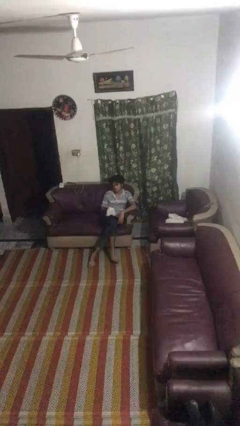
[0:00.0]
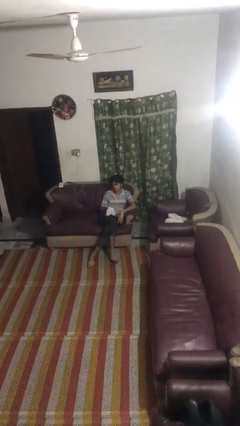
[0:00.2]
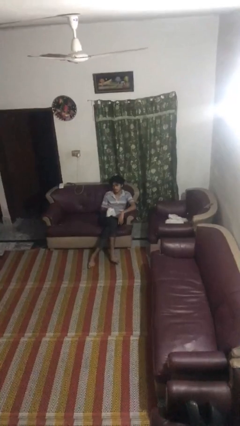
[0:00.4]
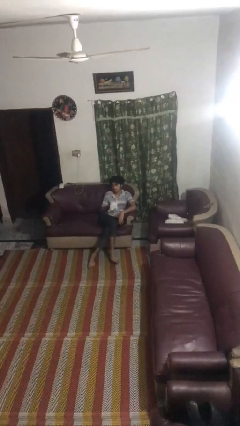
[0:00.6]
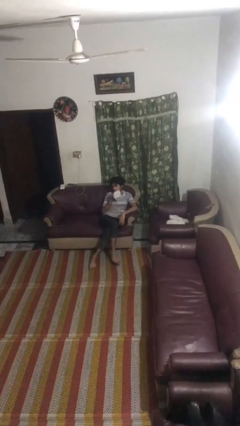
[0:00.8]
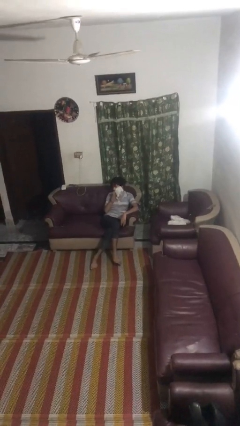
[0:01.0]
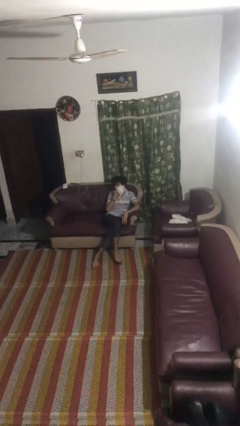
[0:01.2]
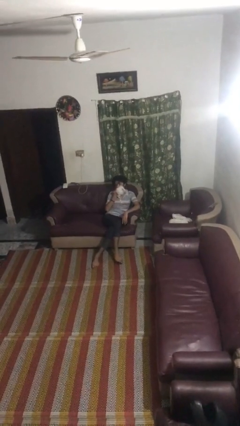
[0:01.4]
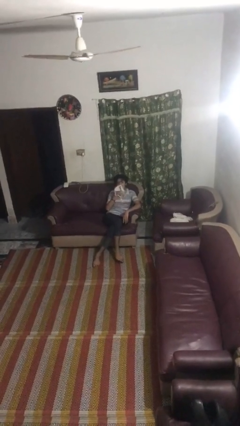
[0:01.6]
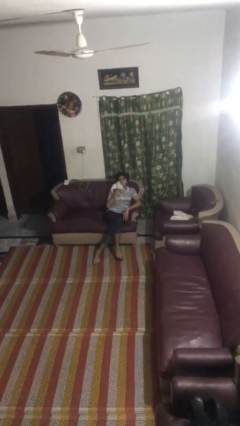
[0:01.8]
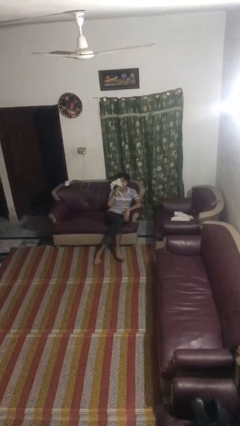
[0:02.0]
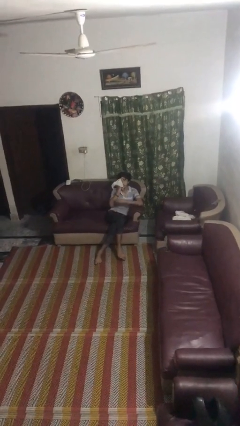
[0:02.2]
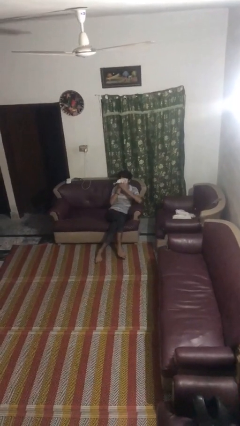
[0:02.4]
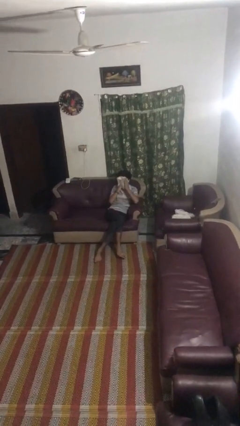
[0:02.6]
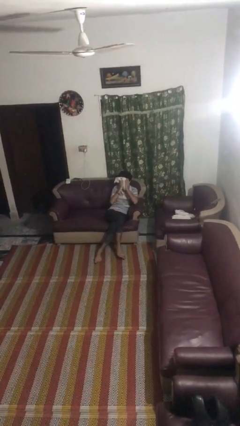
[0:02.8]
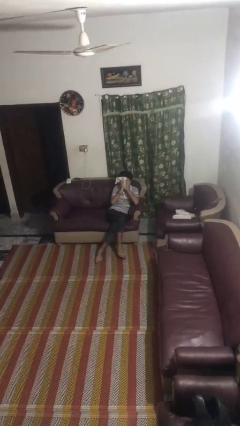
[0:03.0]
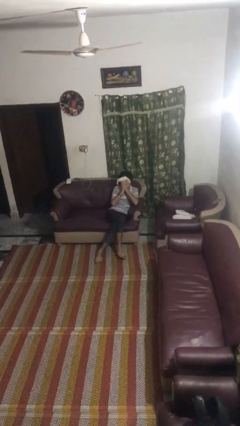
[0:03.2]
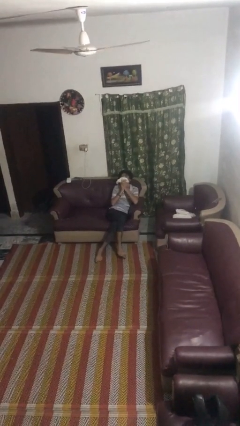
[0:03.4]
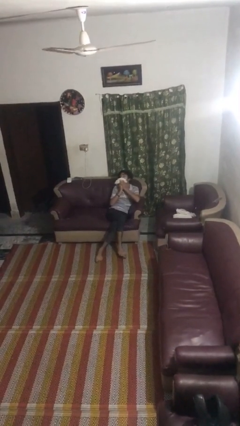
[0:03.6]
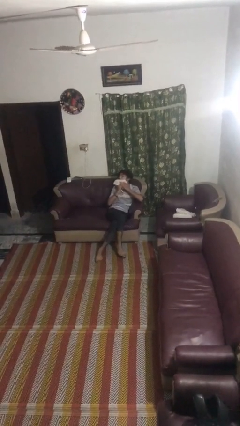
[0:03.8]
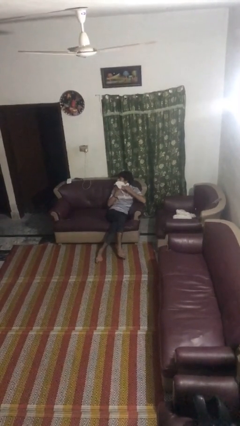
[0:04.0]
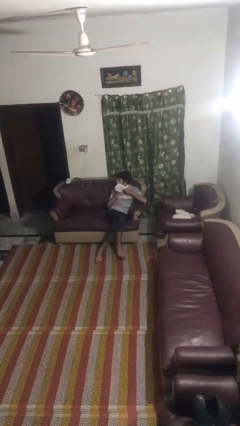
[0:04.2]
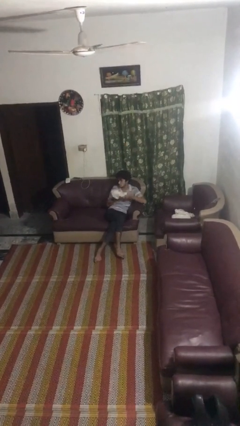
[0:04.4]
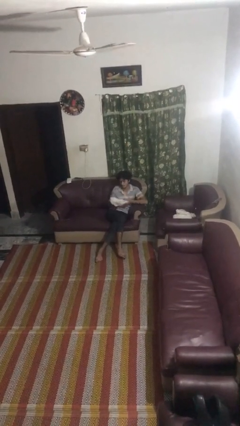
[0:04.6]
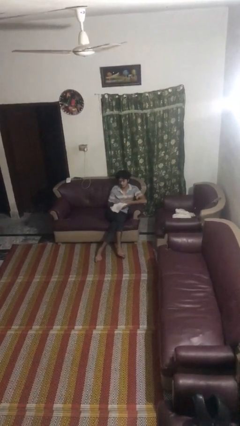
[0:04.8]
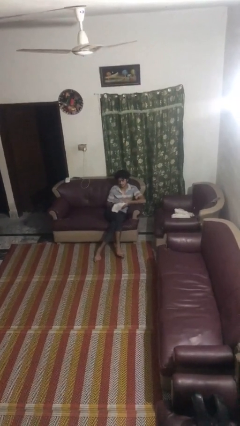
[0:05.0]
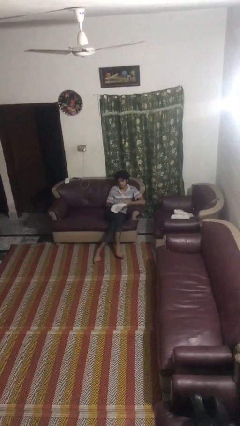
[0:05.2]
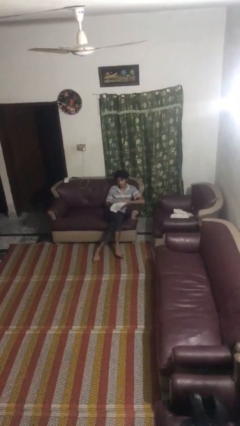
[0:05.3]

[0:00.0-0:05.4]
person wipes mouth with napkin

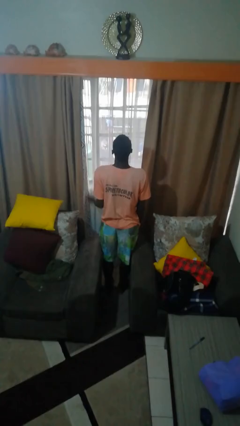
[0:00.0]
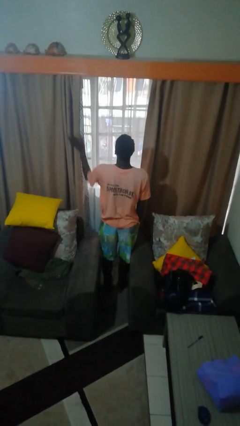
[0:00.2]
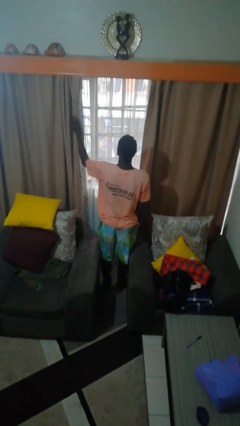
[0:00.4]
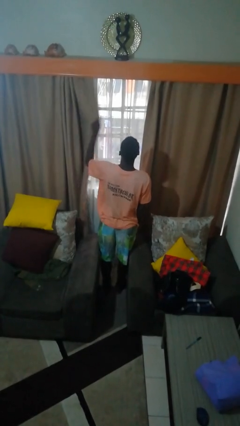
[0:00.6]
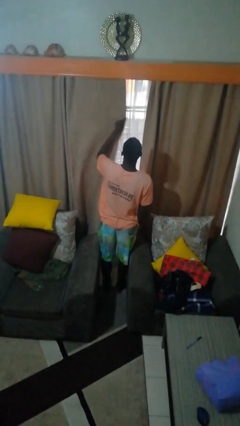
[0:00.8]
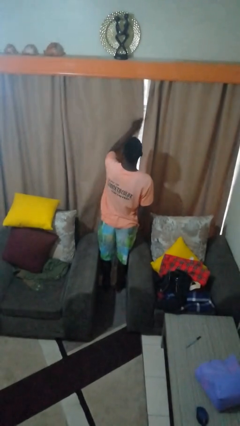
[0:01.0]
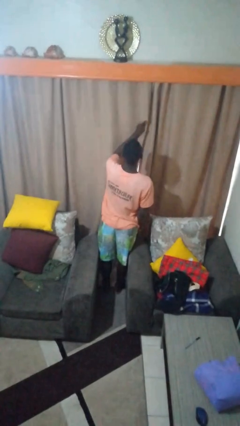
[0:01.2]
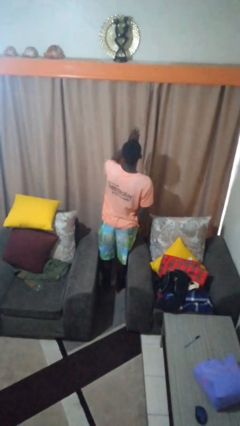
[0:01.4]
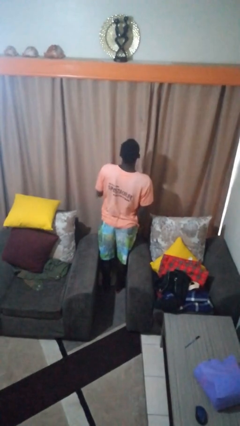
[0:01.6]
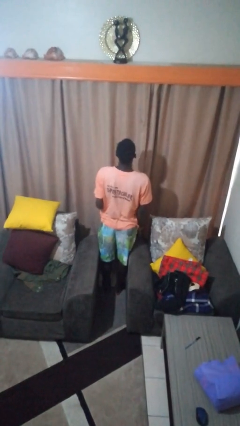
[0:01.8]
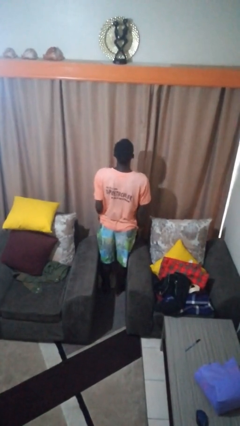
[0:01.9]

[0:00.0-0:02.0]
person closes curtains

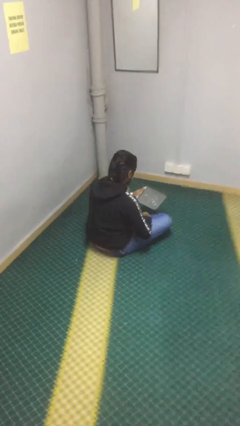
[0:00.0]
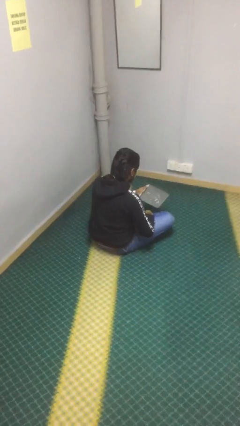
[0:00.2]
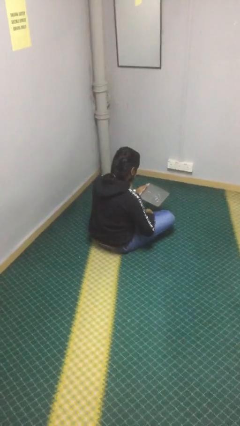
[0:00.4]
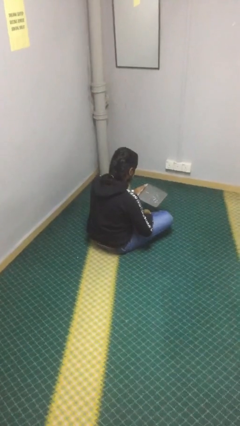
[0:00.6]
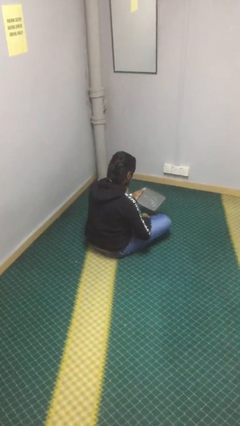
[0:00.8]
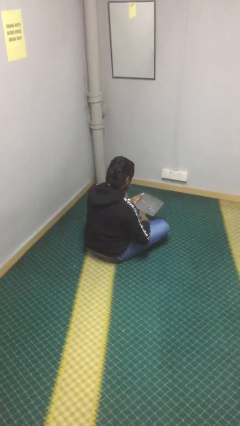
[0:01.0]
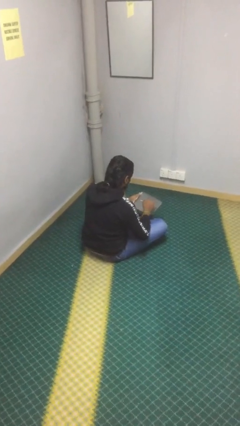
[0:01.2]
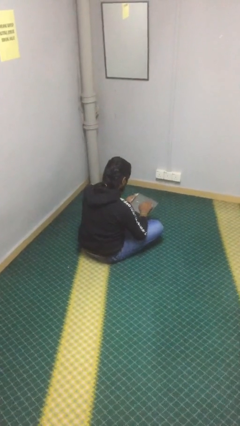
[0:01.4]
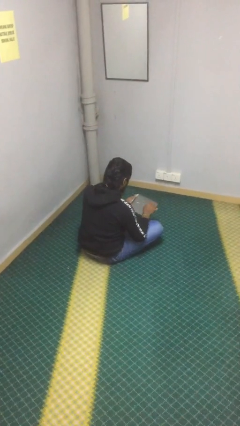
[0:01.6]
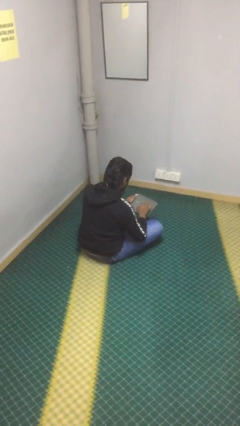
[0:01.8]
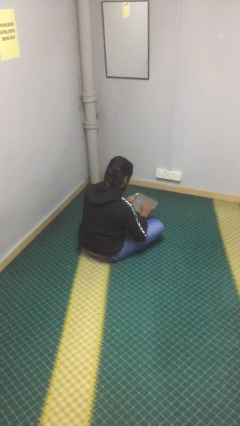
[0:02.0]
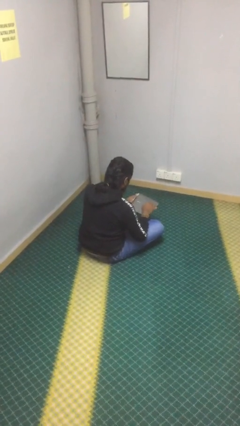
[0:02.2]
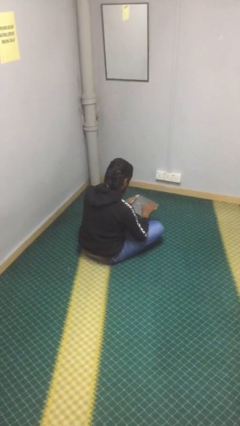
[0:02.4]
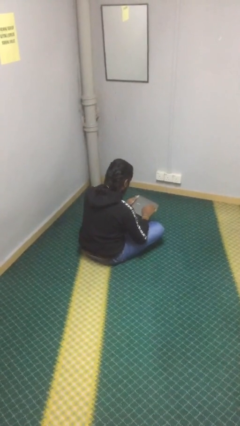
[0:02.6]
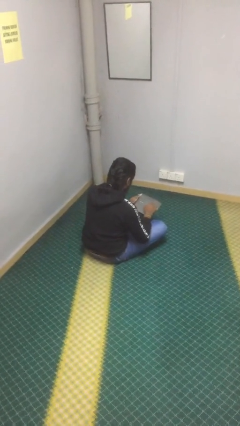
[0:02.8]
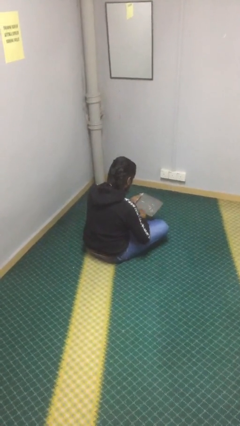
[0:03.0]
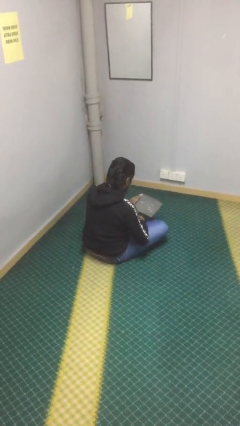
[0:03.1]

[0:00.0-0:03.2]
person interacts with tablet

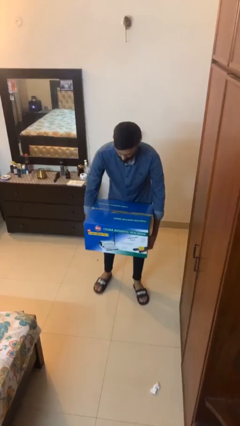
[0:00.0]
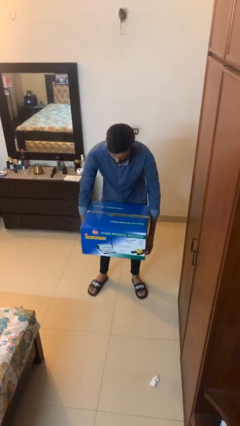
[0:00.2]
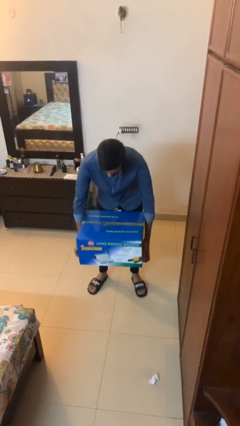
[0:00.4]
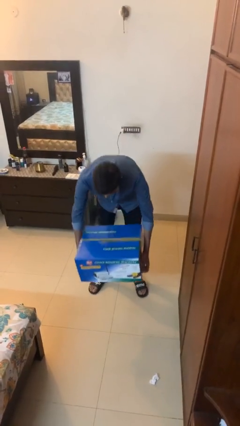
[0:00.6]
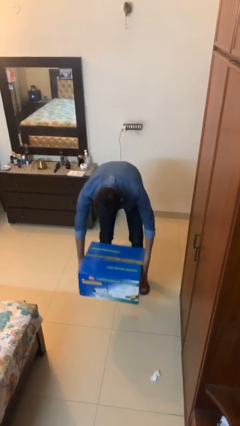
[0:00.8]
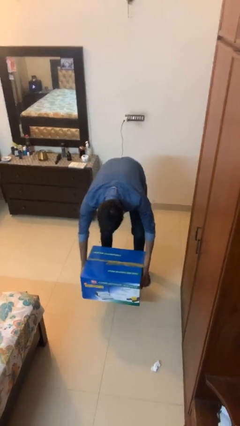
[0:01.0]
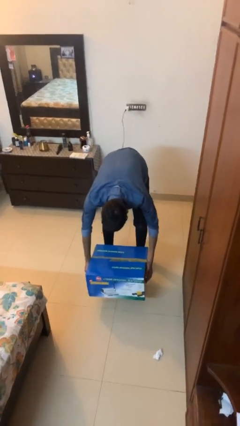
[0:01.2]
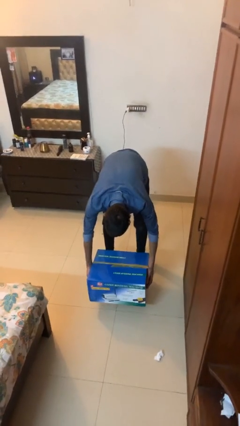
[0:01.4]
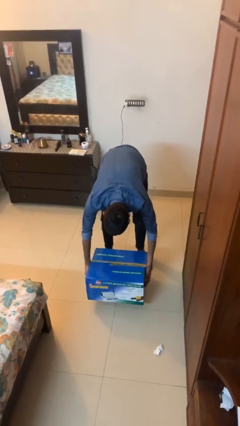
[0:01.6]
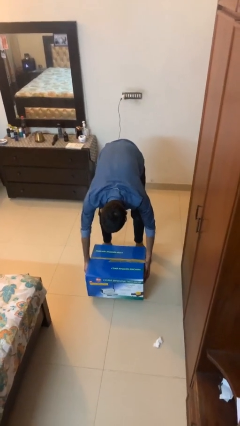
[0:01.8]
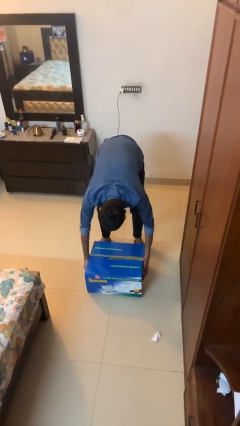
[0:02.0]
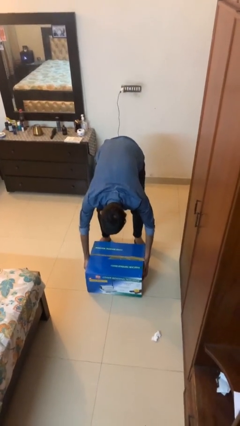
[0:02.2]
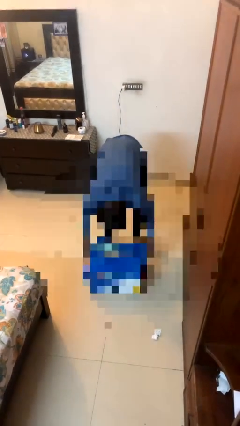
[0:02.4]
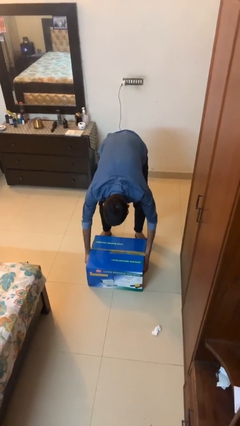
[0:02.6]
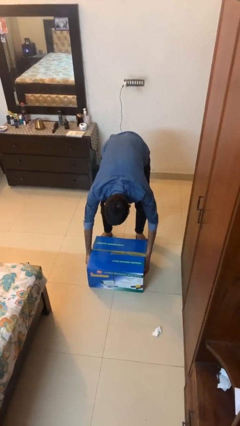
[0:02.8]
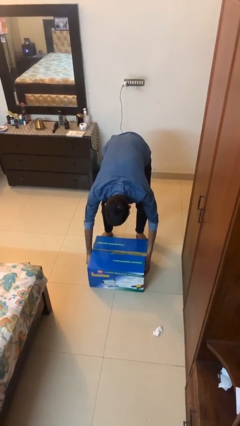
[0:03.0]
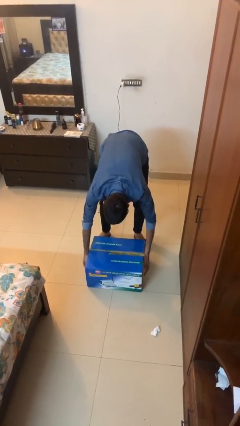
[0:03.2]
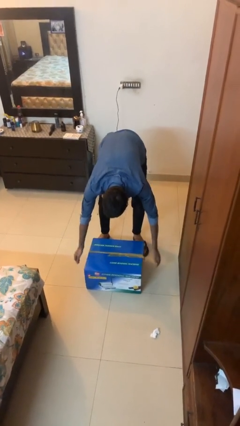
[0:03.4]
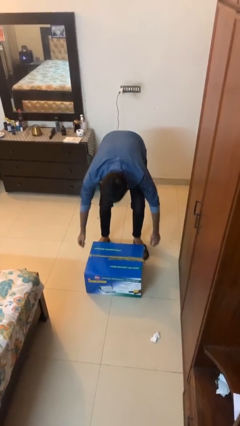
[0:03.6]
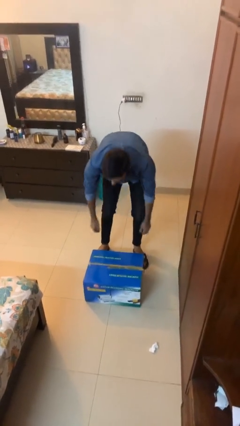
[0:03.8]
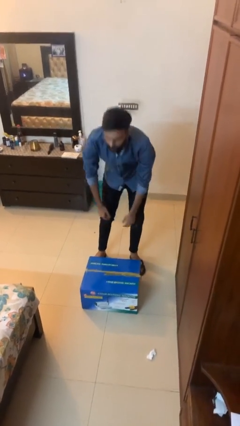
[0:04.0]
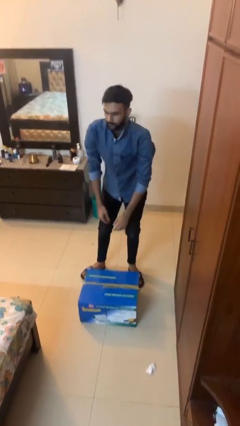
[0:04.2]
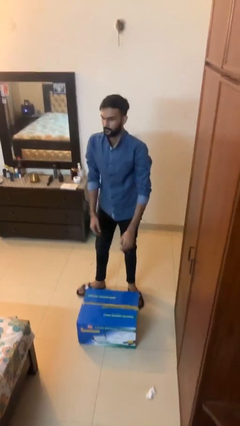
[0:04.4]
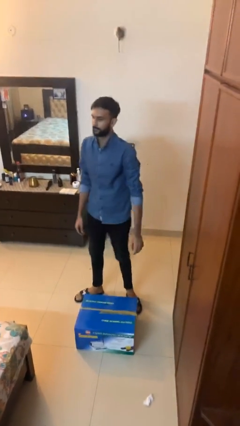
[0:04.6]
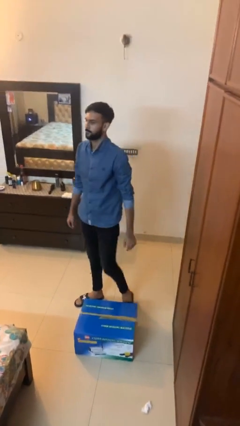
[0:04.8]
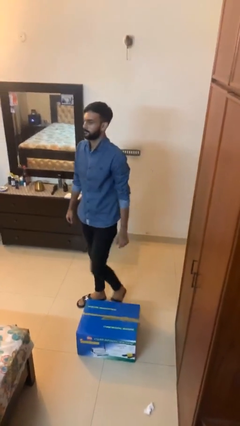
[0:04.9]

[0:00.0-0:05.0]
person puts down object on floor

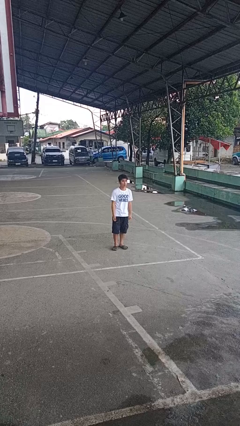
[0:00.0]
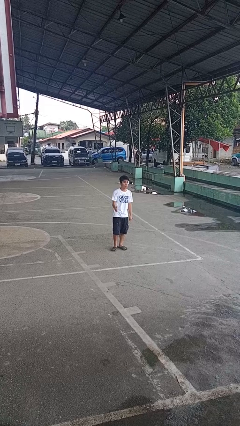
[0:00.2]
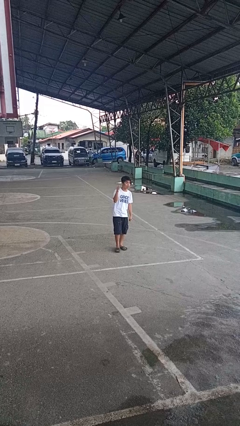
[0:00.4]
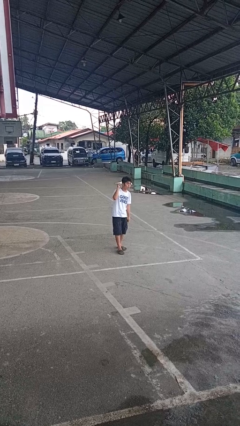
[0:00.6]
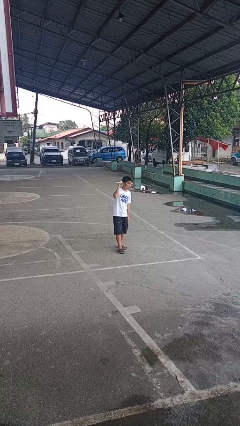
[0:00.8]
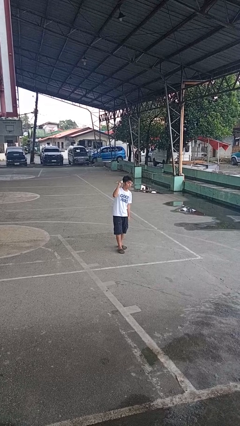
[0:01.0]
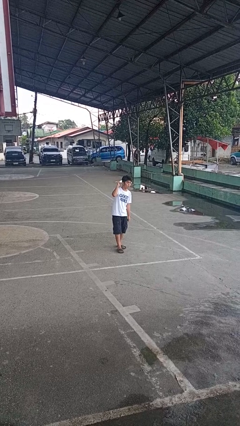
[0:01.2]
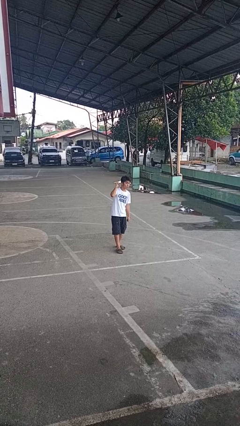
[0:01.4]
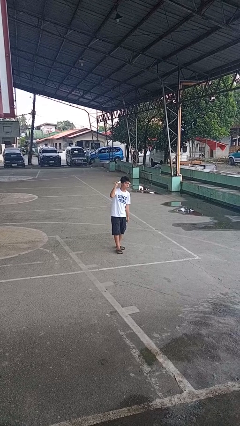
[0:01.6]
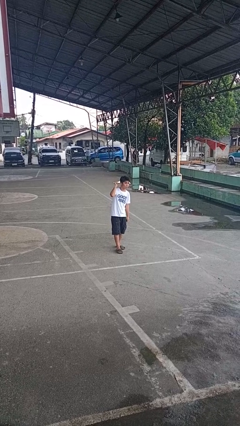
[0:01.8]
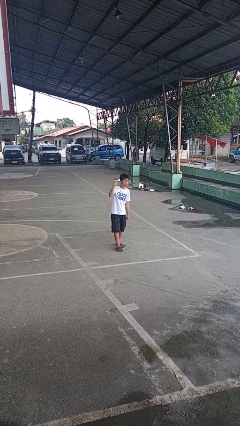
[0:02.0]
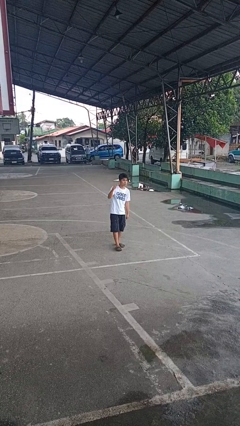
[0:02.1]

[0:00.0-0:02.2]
person gestures behind me
